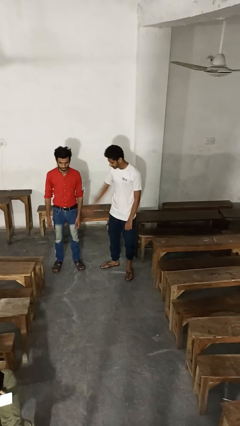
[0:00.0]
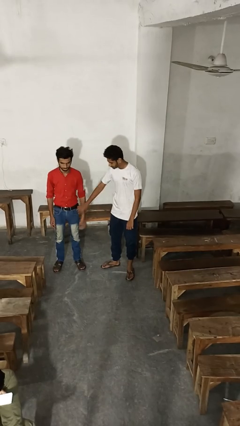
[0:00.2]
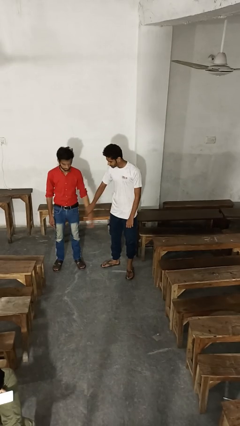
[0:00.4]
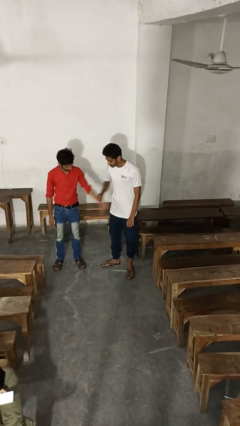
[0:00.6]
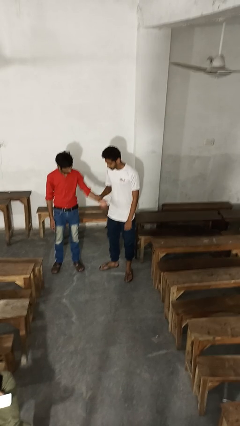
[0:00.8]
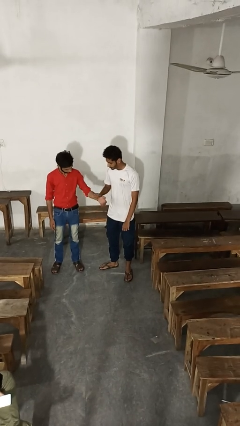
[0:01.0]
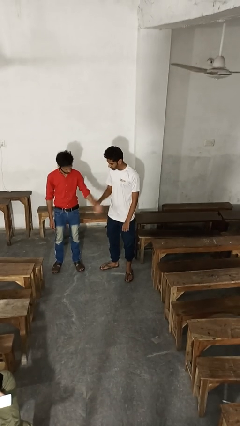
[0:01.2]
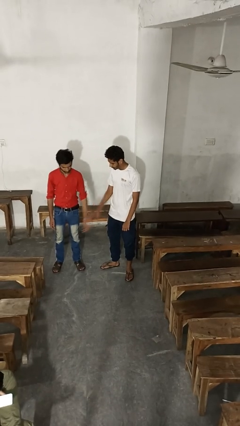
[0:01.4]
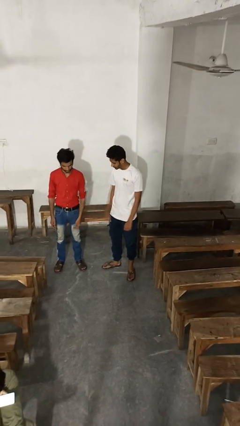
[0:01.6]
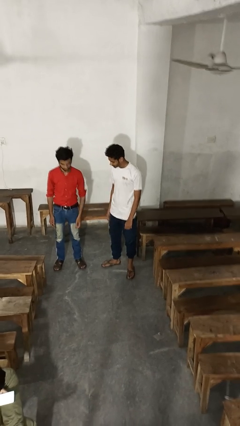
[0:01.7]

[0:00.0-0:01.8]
person grabs person by forearm

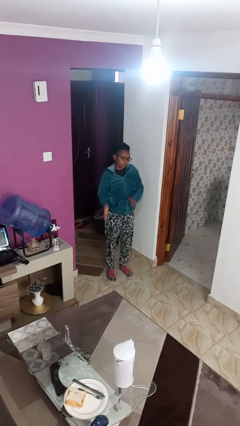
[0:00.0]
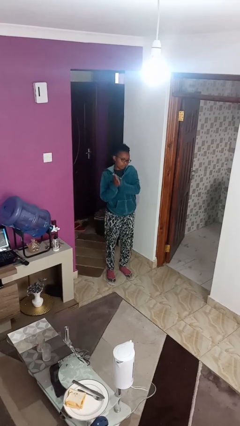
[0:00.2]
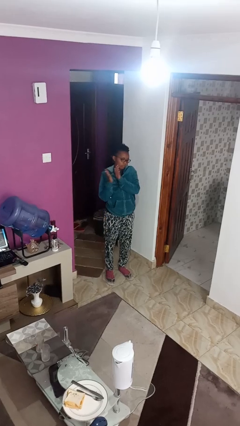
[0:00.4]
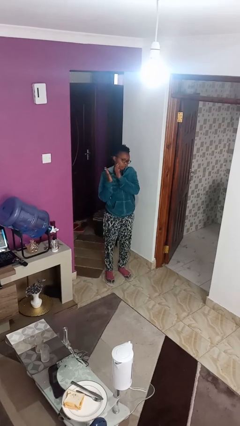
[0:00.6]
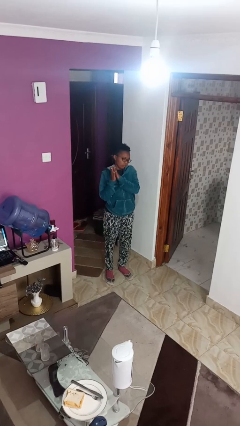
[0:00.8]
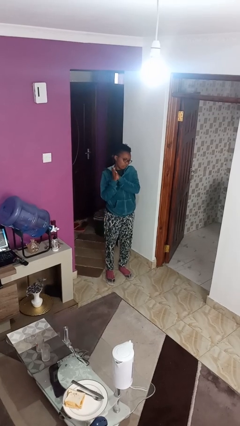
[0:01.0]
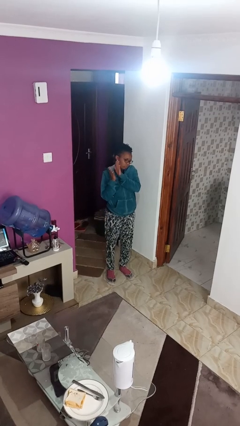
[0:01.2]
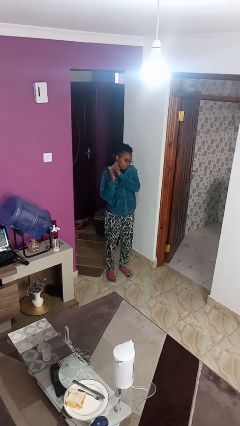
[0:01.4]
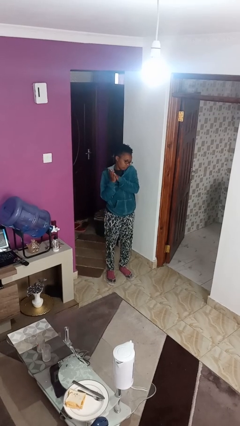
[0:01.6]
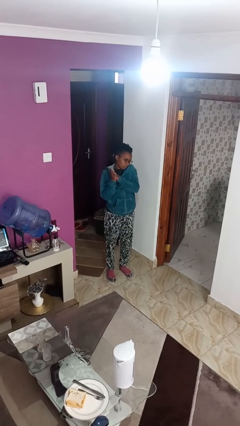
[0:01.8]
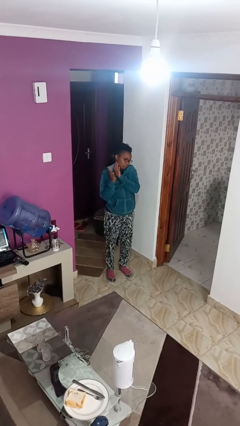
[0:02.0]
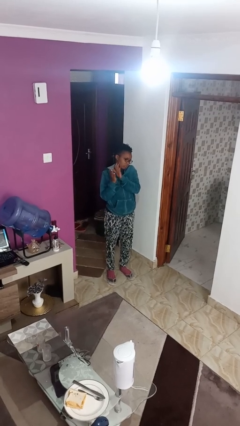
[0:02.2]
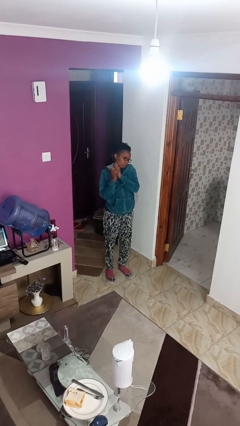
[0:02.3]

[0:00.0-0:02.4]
person claps hands

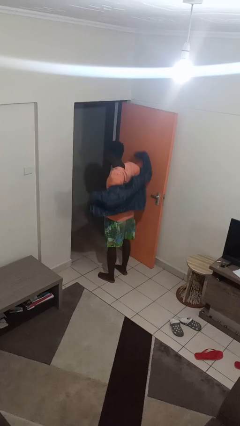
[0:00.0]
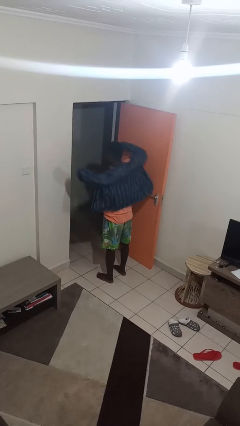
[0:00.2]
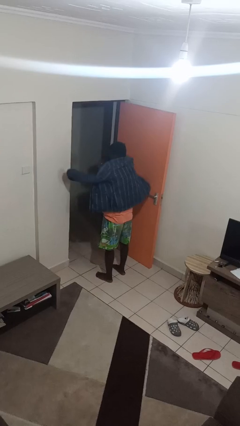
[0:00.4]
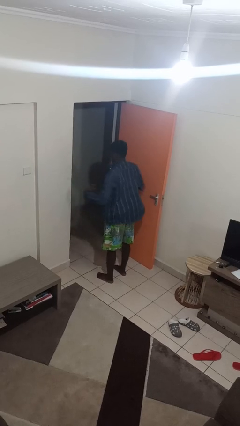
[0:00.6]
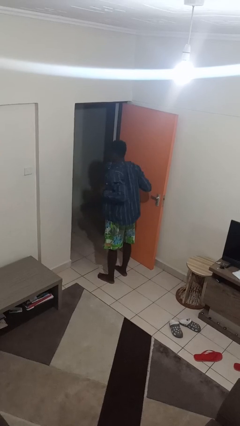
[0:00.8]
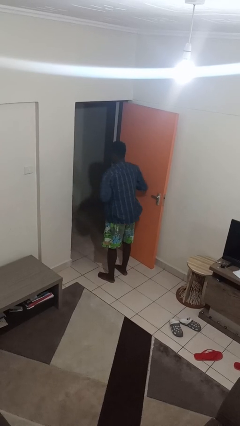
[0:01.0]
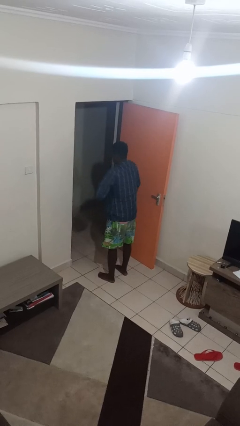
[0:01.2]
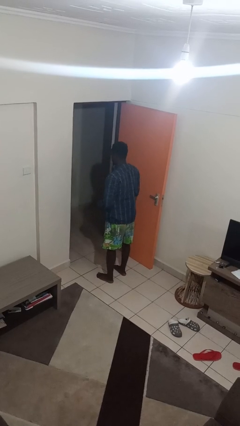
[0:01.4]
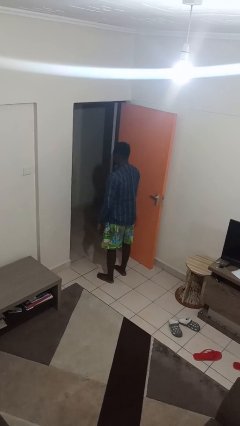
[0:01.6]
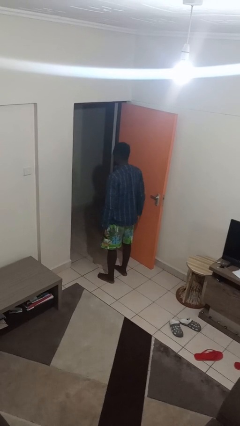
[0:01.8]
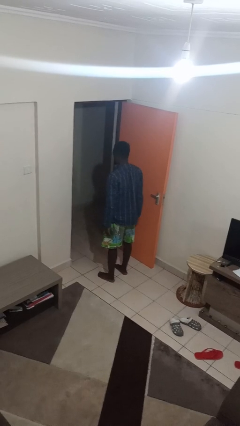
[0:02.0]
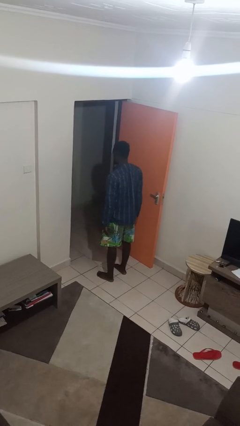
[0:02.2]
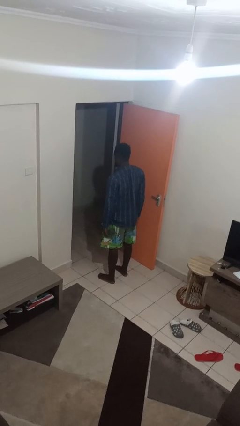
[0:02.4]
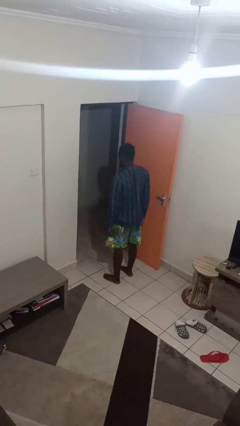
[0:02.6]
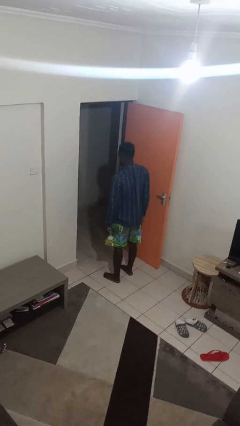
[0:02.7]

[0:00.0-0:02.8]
person puts on jacket

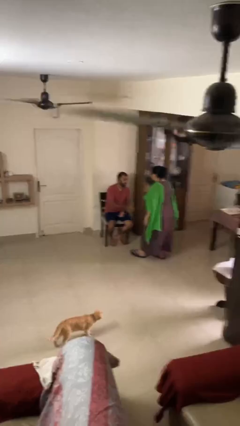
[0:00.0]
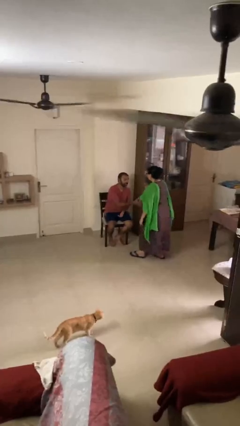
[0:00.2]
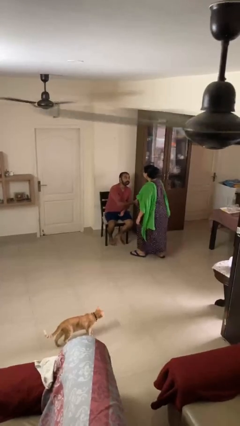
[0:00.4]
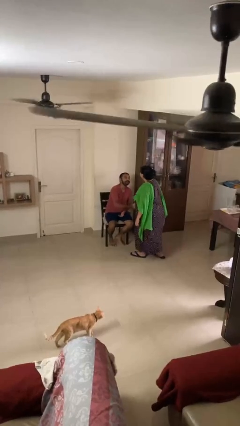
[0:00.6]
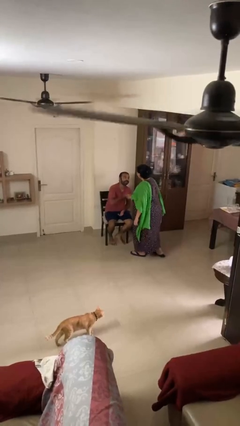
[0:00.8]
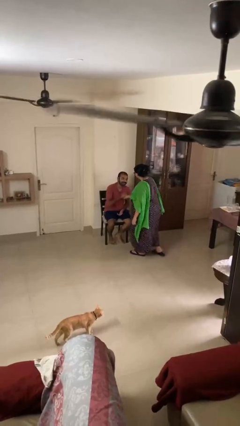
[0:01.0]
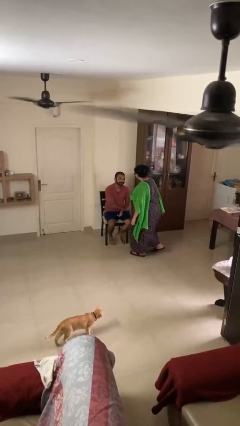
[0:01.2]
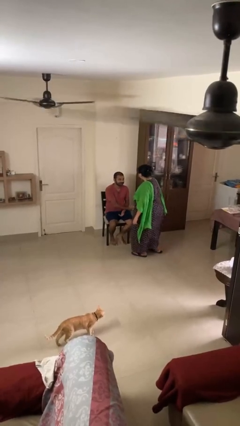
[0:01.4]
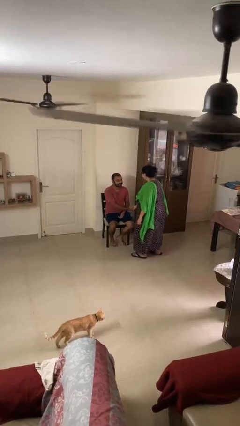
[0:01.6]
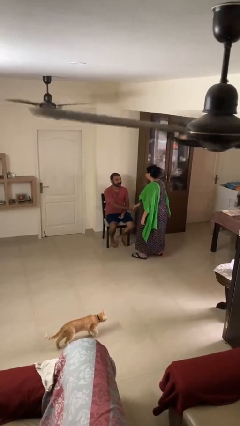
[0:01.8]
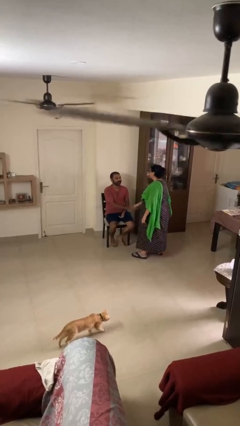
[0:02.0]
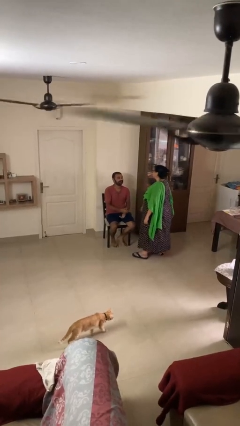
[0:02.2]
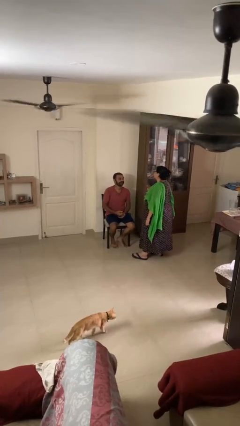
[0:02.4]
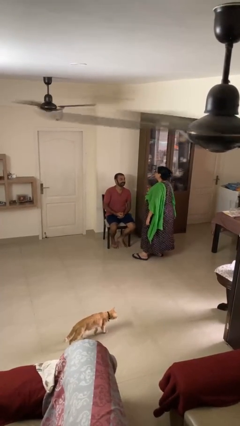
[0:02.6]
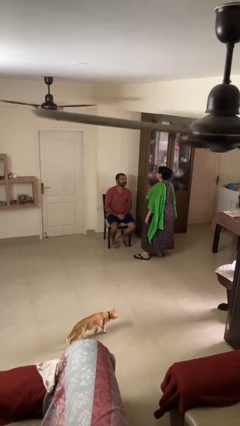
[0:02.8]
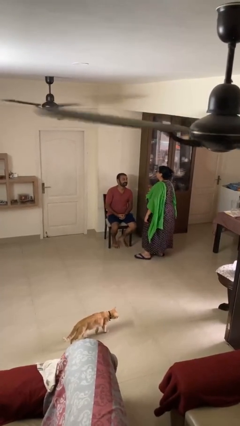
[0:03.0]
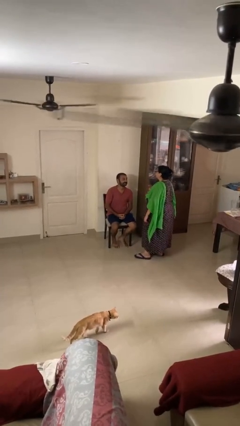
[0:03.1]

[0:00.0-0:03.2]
person shakes hand

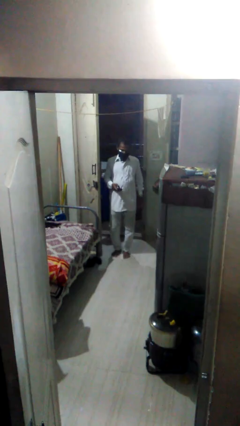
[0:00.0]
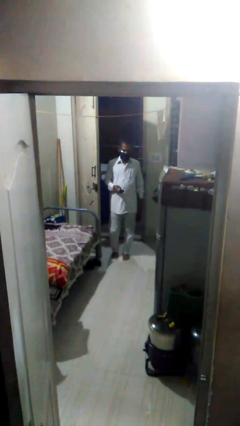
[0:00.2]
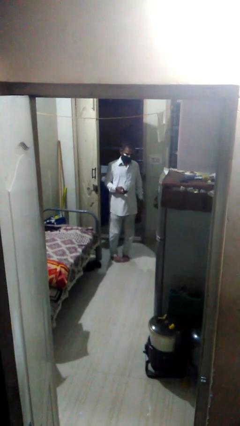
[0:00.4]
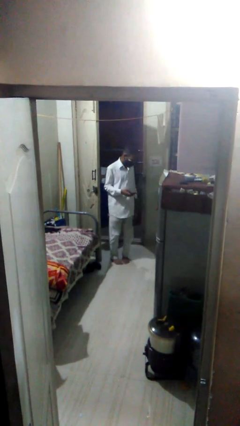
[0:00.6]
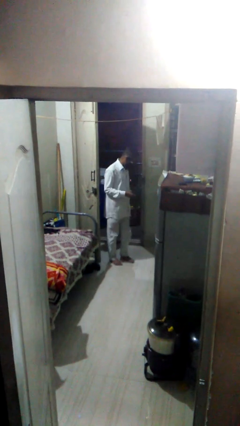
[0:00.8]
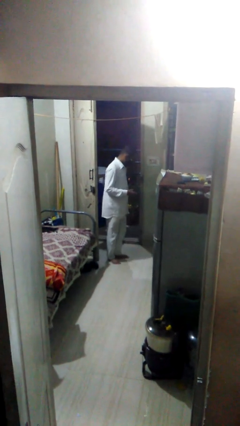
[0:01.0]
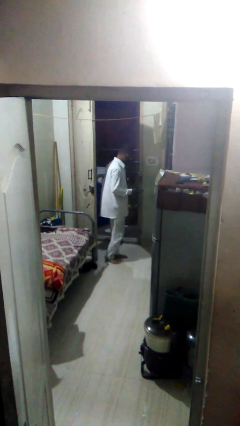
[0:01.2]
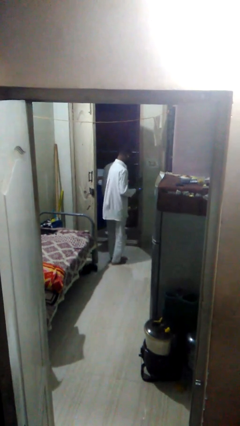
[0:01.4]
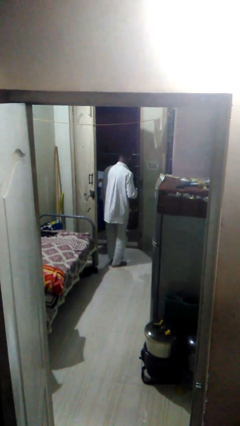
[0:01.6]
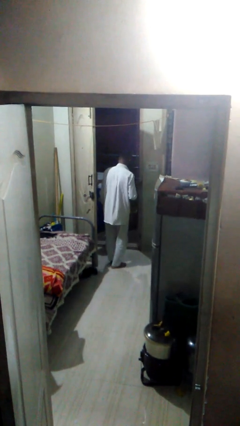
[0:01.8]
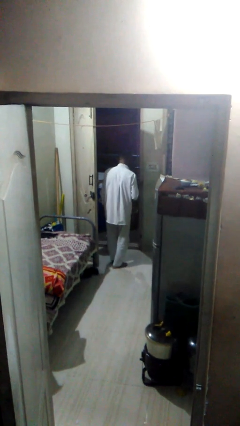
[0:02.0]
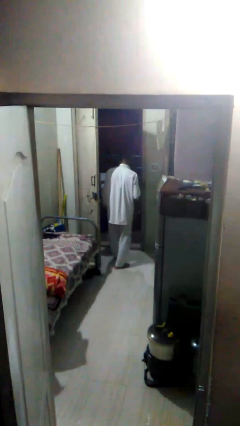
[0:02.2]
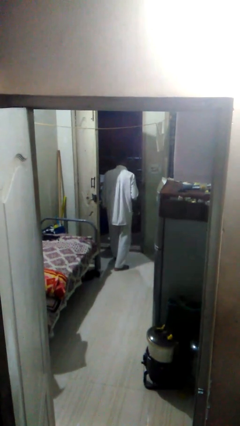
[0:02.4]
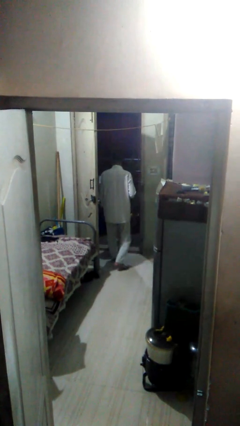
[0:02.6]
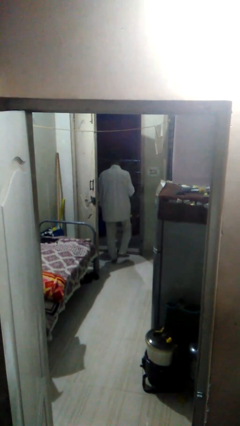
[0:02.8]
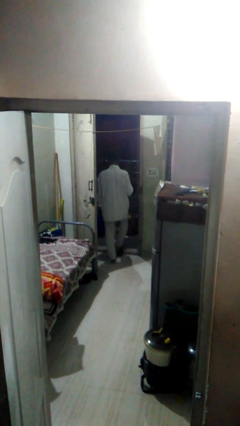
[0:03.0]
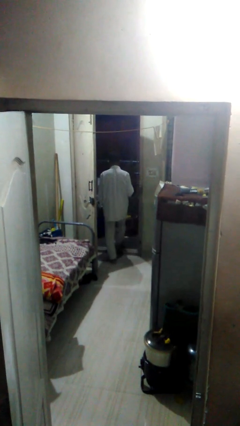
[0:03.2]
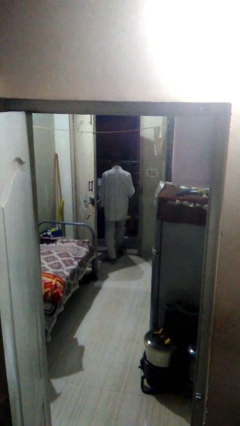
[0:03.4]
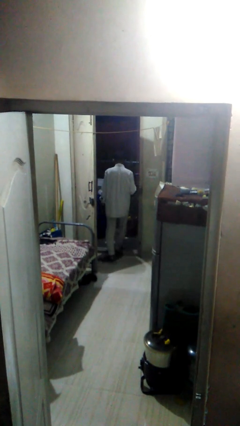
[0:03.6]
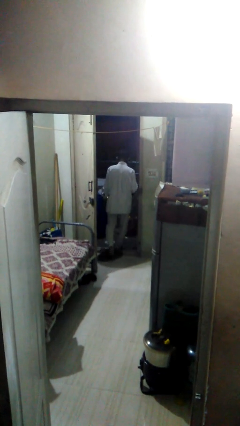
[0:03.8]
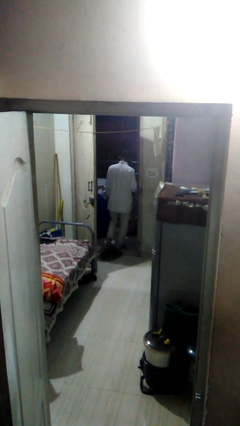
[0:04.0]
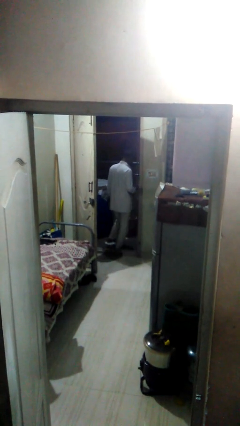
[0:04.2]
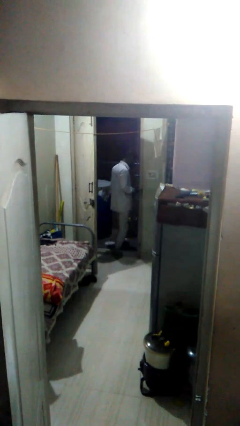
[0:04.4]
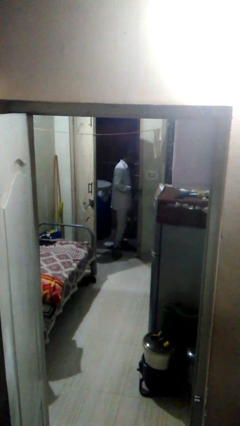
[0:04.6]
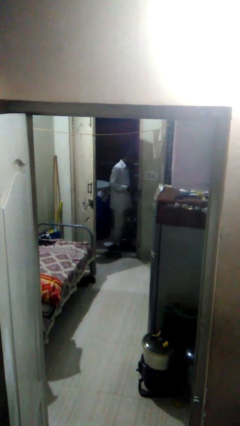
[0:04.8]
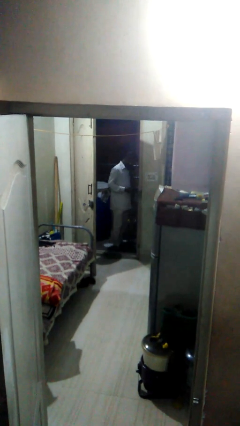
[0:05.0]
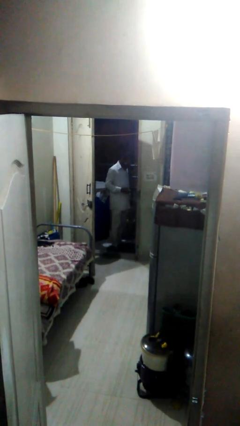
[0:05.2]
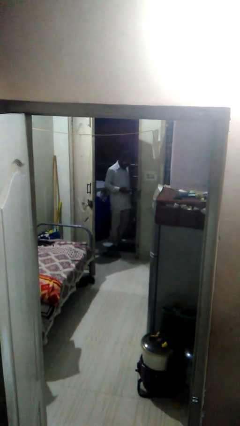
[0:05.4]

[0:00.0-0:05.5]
person exits scene through structure

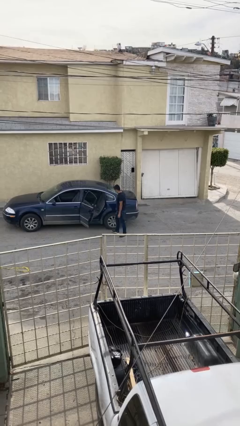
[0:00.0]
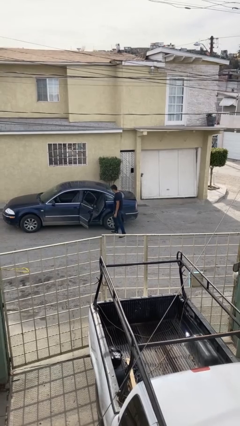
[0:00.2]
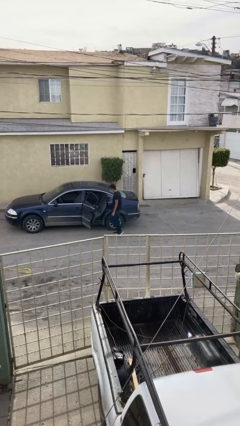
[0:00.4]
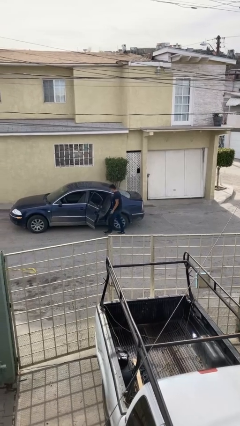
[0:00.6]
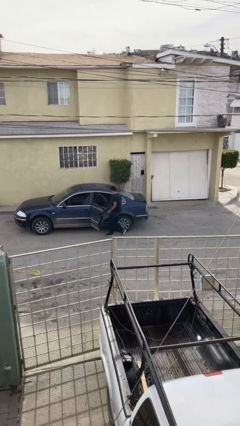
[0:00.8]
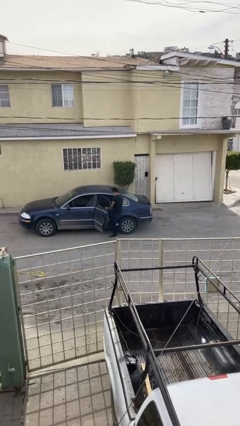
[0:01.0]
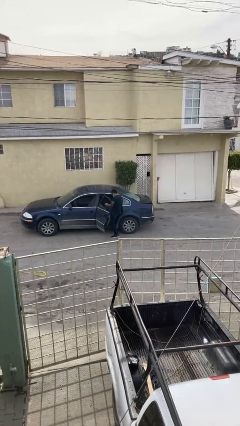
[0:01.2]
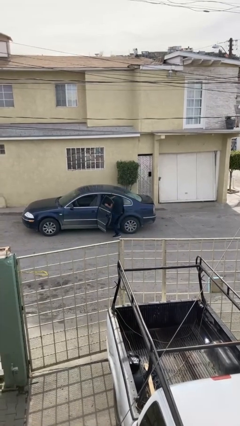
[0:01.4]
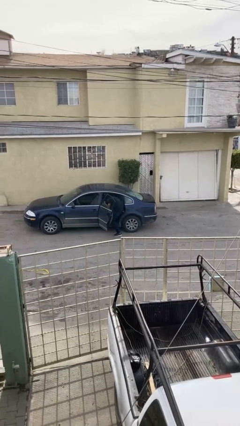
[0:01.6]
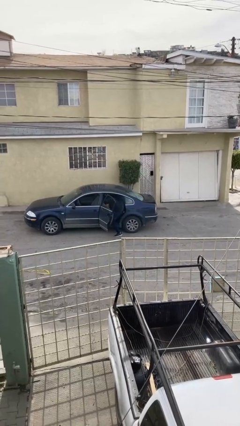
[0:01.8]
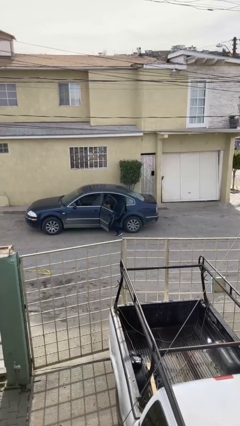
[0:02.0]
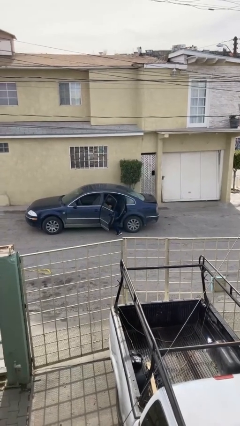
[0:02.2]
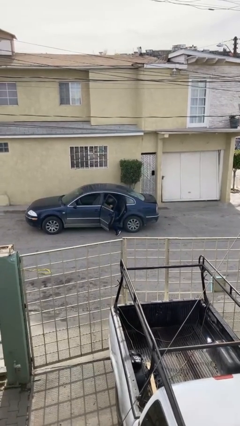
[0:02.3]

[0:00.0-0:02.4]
person enters car
